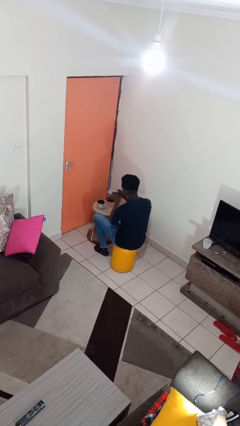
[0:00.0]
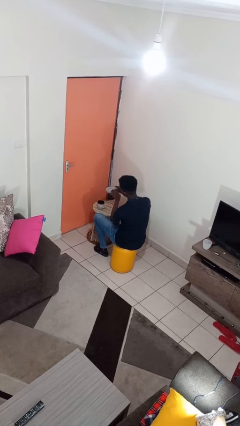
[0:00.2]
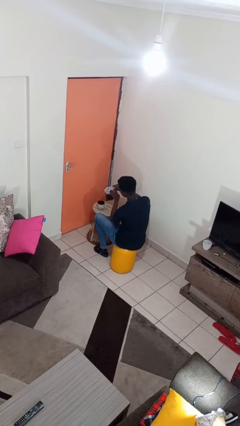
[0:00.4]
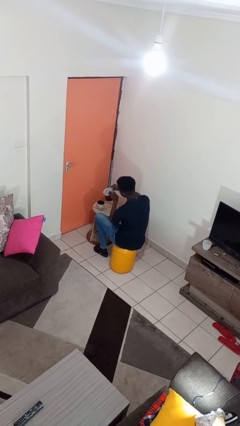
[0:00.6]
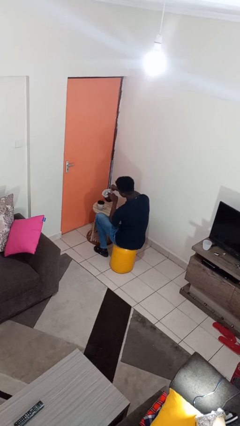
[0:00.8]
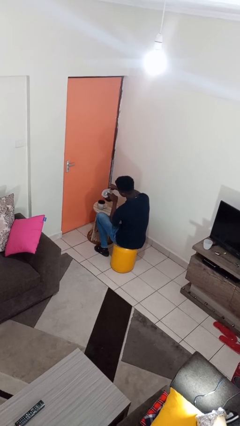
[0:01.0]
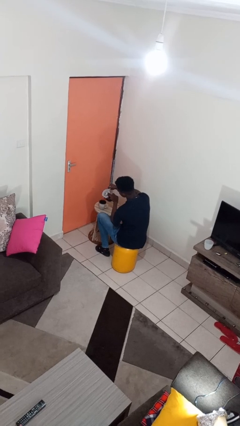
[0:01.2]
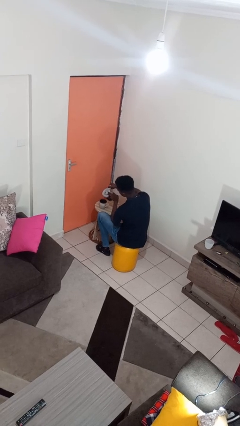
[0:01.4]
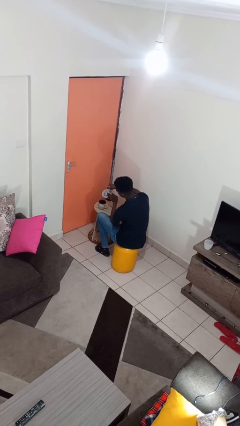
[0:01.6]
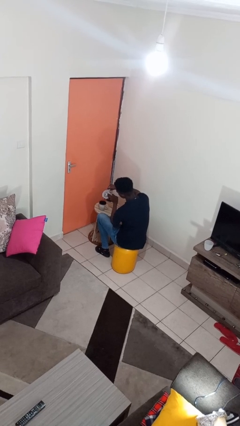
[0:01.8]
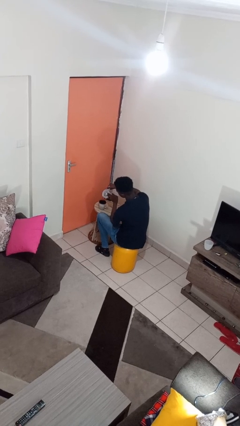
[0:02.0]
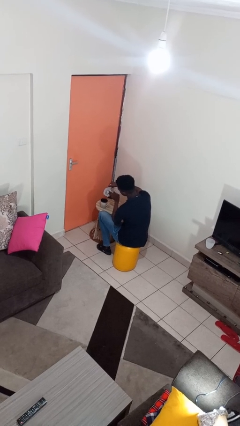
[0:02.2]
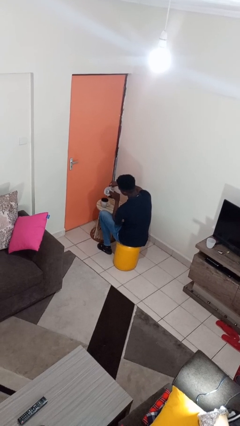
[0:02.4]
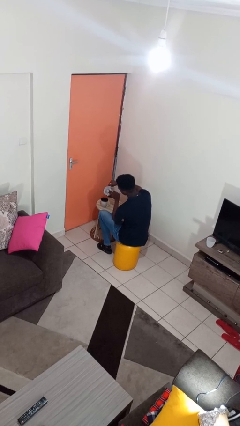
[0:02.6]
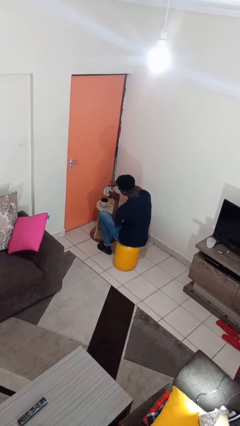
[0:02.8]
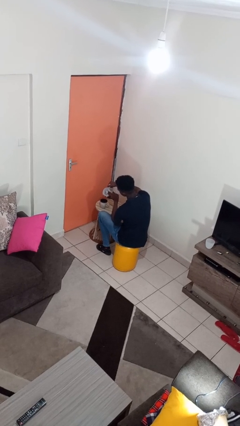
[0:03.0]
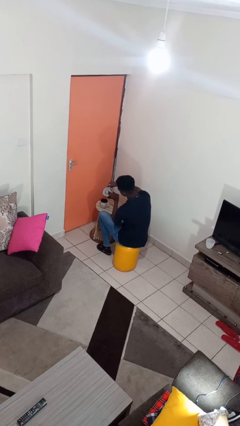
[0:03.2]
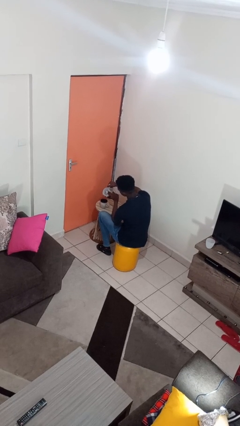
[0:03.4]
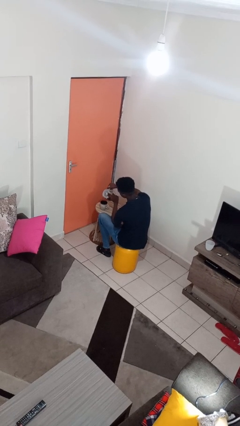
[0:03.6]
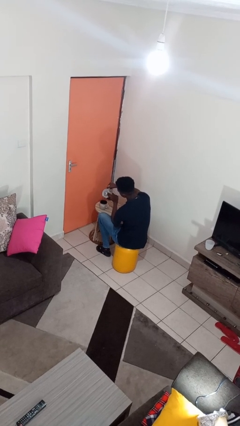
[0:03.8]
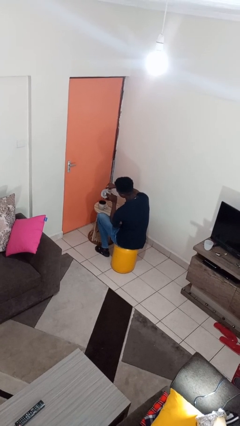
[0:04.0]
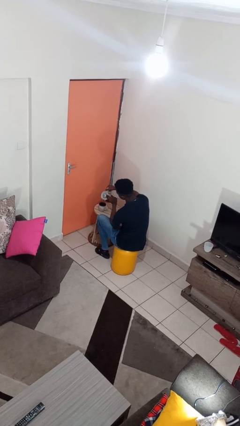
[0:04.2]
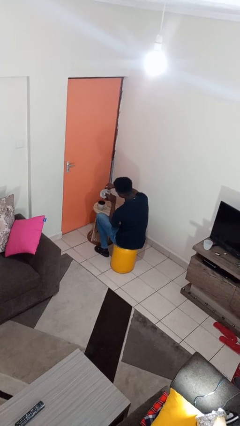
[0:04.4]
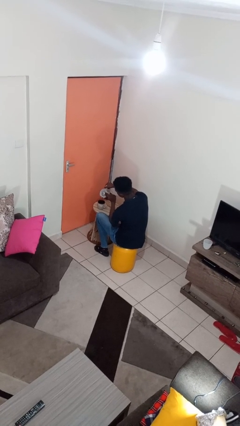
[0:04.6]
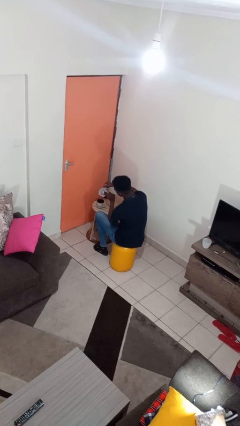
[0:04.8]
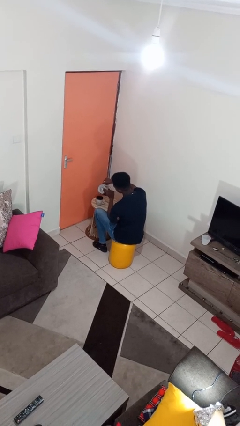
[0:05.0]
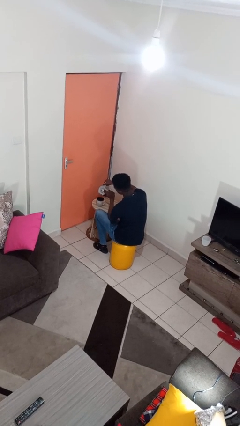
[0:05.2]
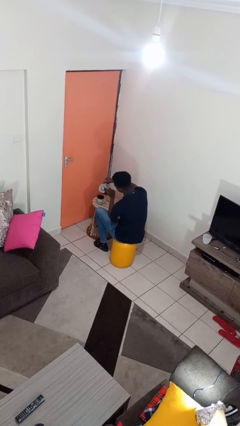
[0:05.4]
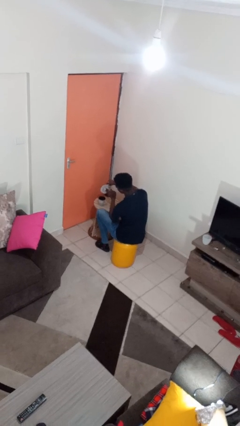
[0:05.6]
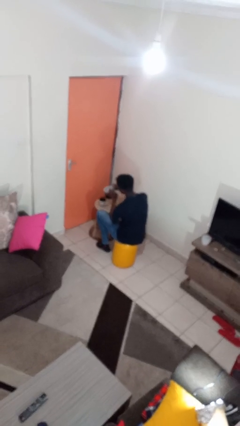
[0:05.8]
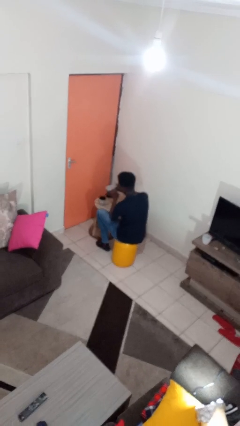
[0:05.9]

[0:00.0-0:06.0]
person pours coffee into mug

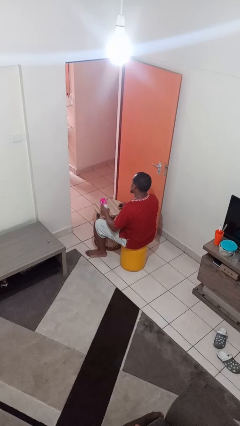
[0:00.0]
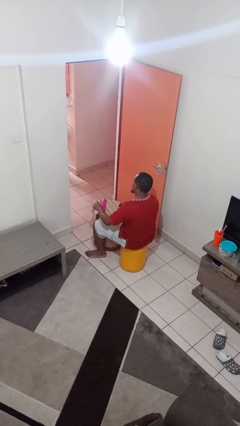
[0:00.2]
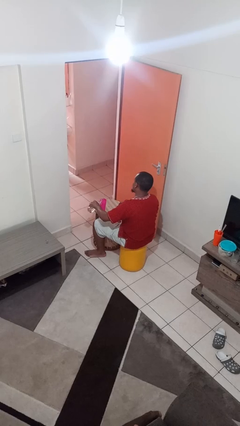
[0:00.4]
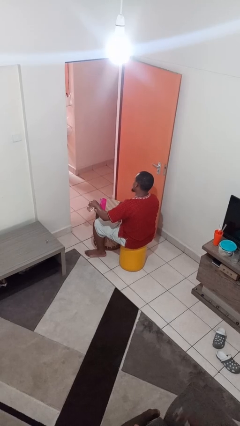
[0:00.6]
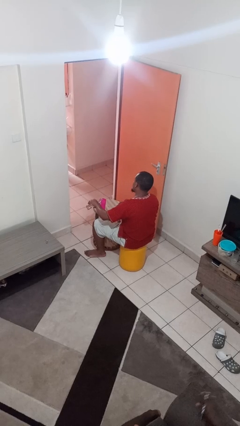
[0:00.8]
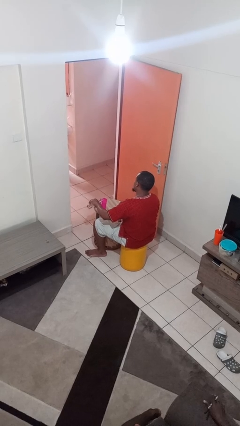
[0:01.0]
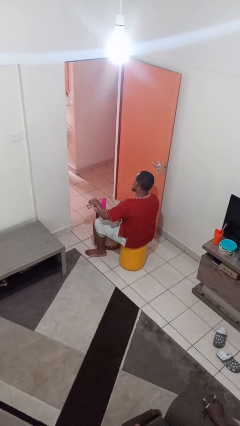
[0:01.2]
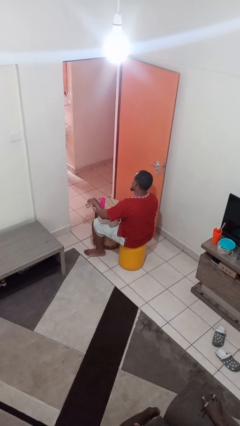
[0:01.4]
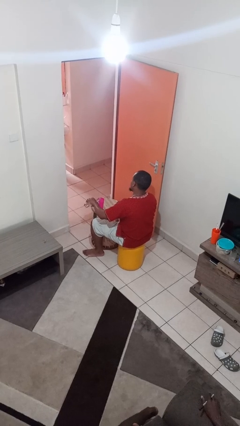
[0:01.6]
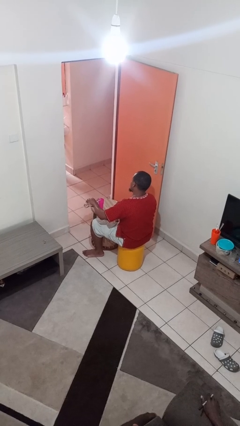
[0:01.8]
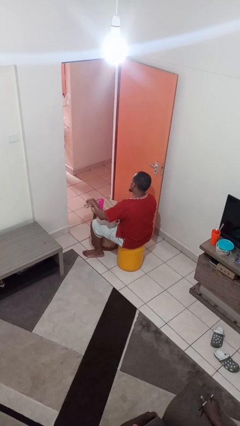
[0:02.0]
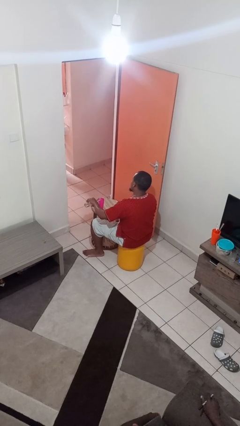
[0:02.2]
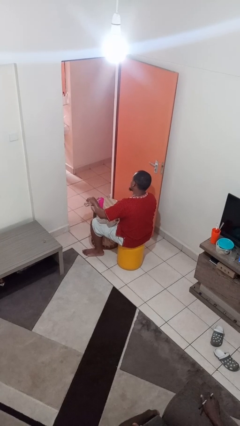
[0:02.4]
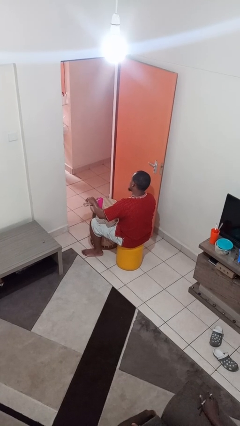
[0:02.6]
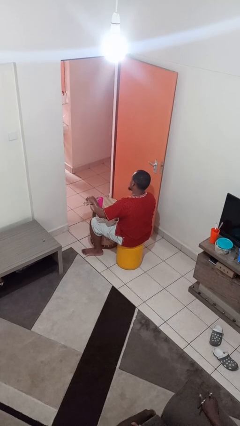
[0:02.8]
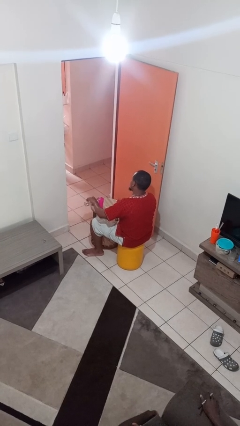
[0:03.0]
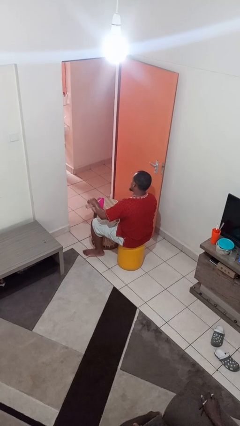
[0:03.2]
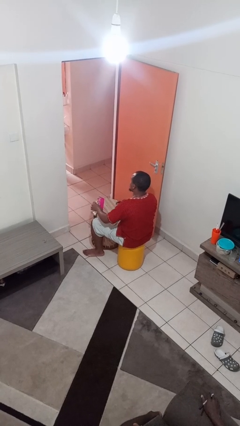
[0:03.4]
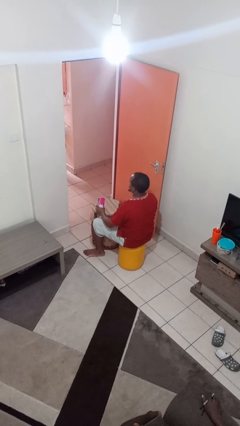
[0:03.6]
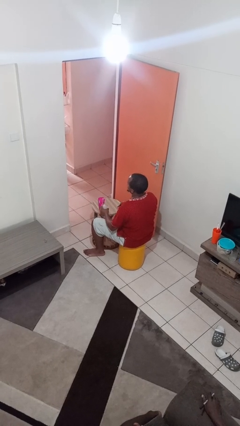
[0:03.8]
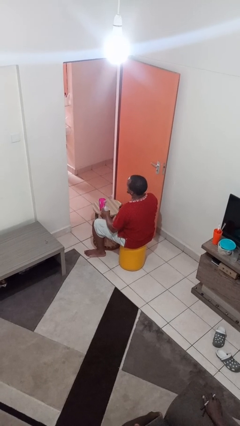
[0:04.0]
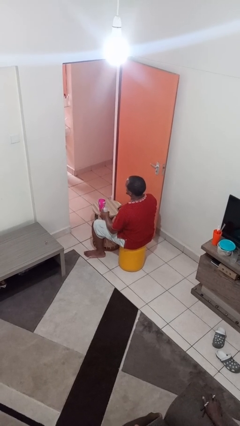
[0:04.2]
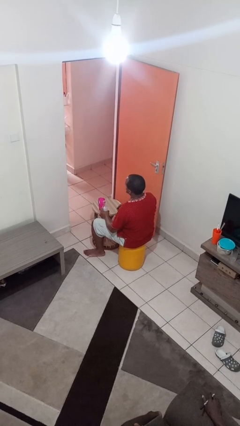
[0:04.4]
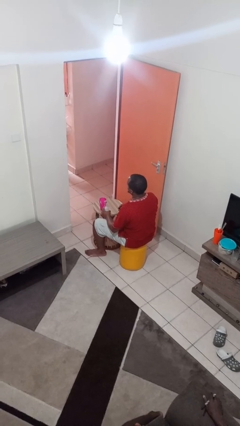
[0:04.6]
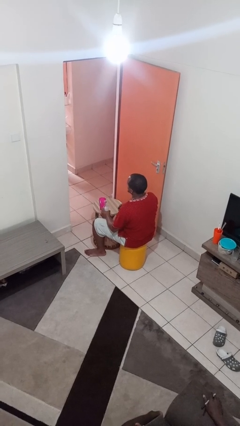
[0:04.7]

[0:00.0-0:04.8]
person pours liquid into cup

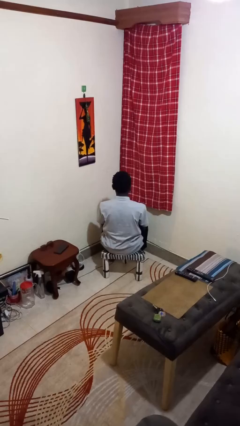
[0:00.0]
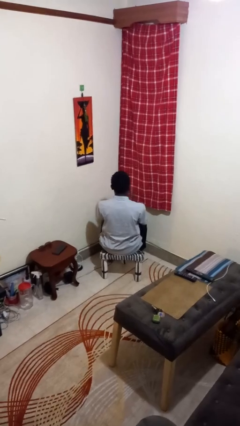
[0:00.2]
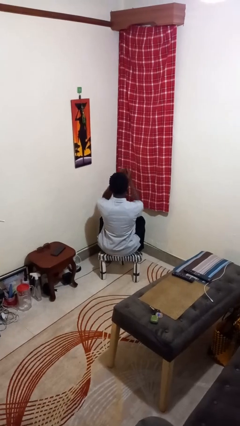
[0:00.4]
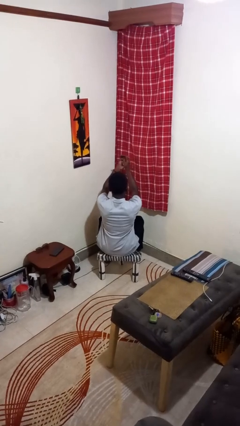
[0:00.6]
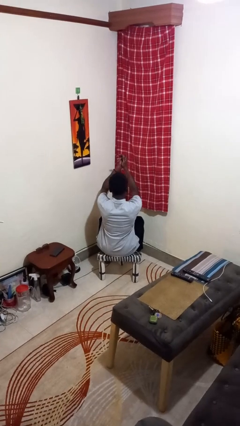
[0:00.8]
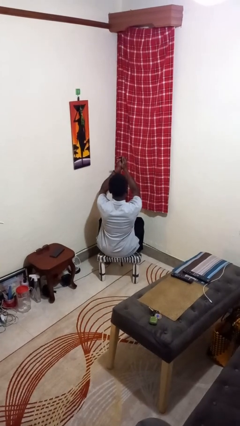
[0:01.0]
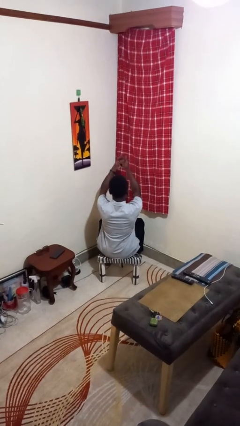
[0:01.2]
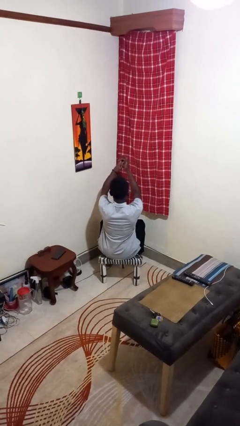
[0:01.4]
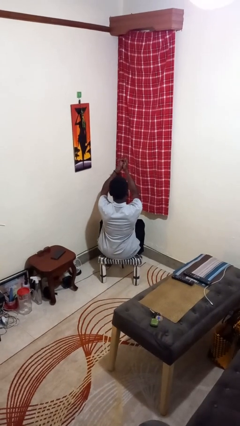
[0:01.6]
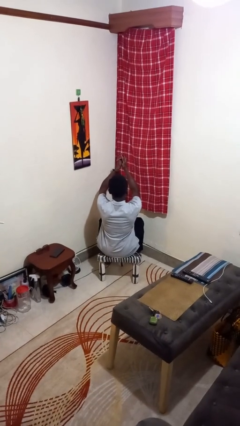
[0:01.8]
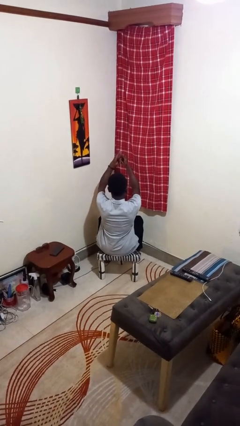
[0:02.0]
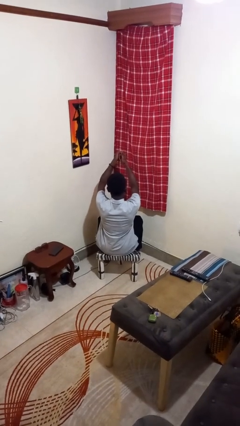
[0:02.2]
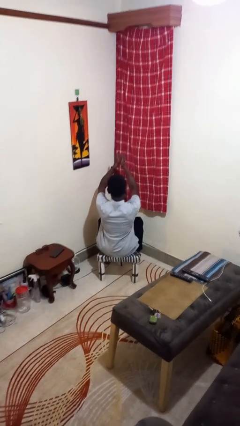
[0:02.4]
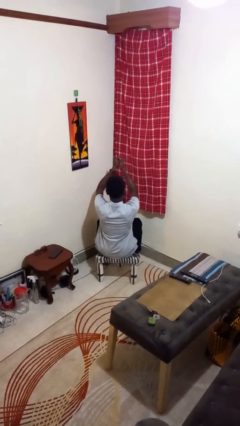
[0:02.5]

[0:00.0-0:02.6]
person cracks knuckles

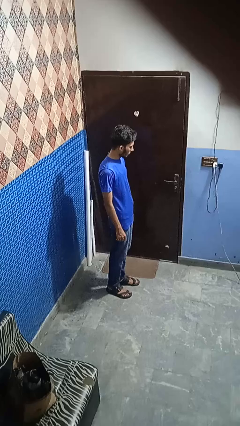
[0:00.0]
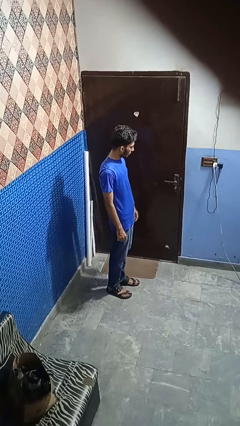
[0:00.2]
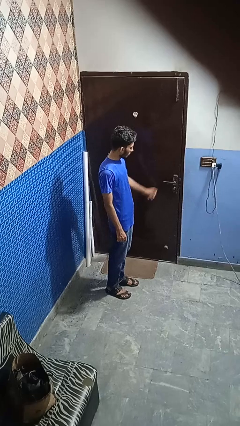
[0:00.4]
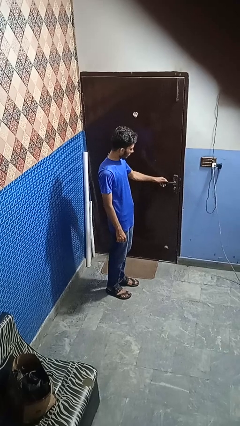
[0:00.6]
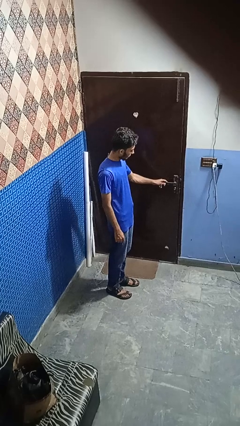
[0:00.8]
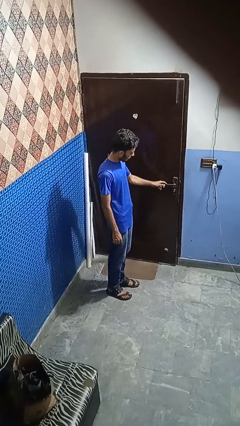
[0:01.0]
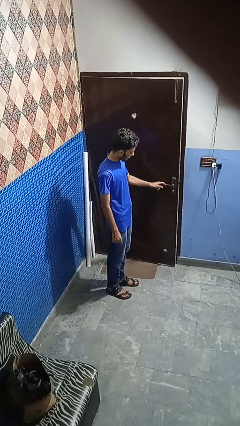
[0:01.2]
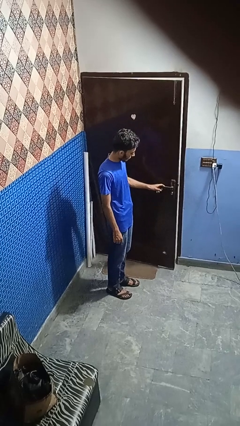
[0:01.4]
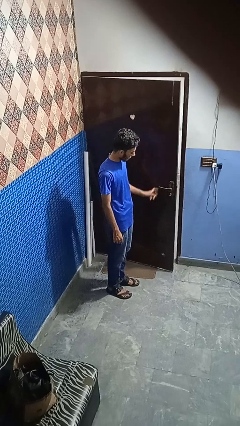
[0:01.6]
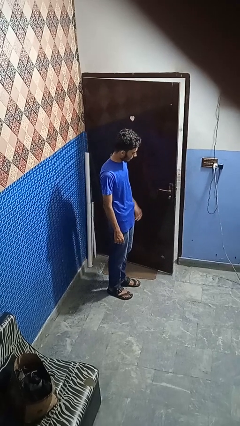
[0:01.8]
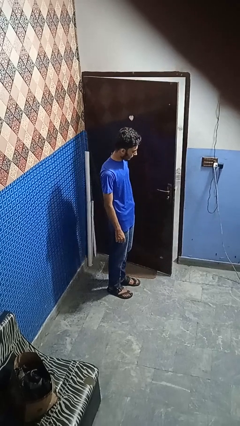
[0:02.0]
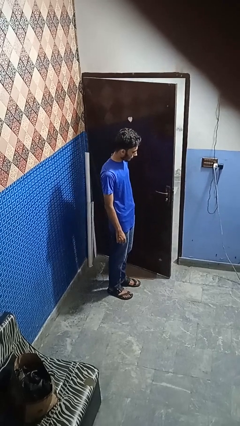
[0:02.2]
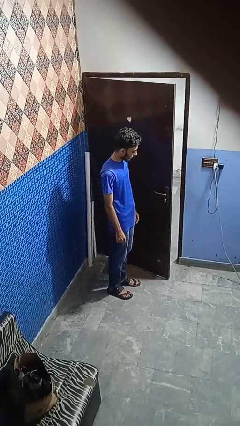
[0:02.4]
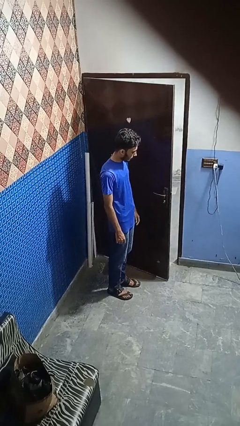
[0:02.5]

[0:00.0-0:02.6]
person opens facility door

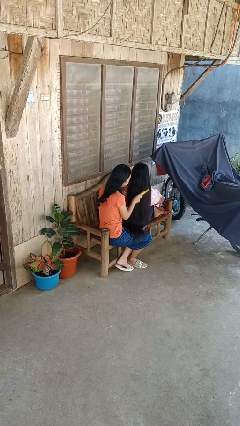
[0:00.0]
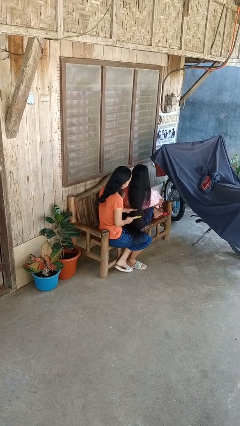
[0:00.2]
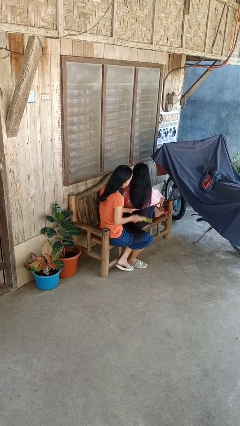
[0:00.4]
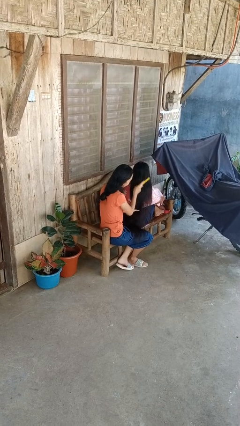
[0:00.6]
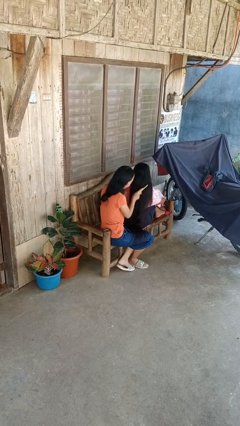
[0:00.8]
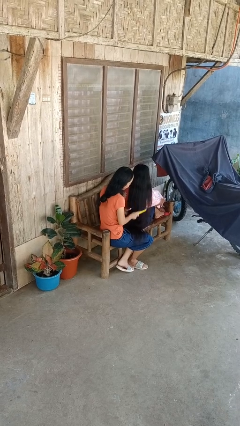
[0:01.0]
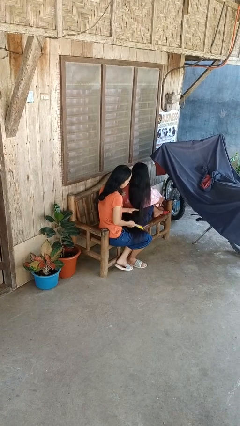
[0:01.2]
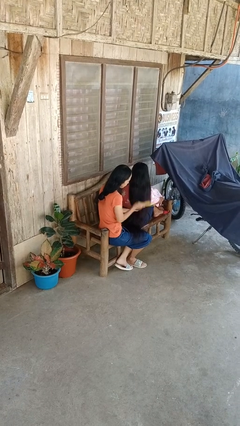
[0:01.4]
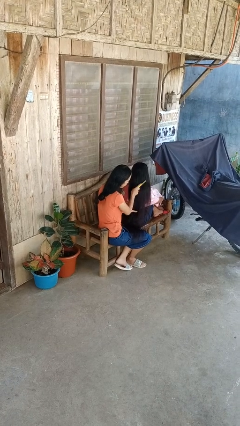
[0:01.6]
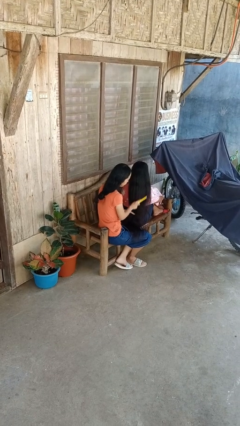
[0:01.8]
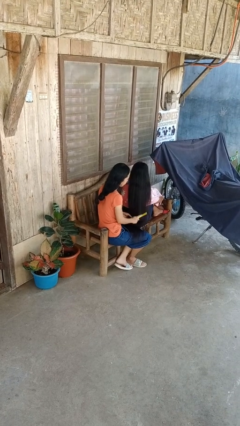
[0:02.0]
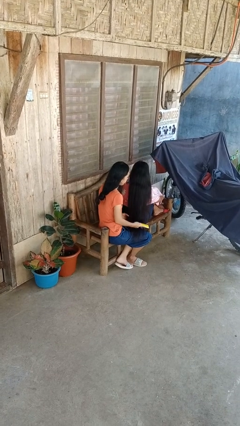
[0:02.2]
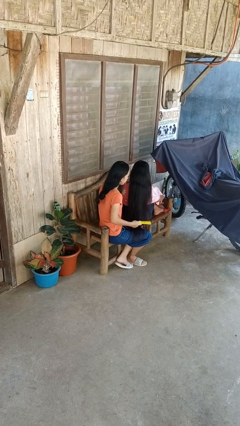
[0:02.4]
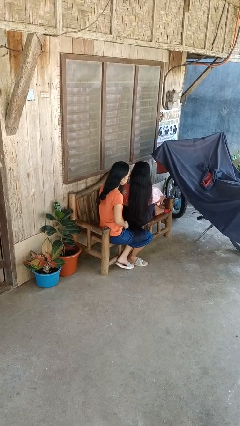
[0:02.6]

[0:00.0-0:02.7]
person brushes hair of person
